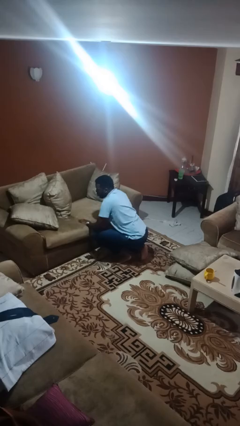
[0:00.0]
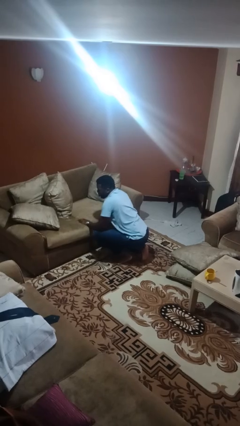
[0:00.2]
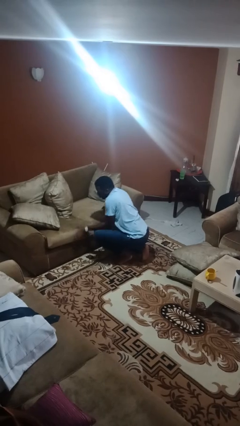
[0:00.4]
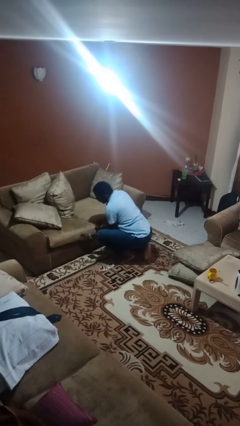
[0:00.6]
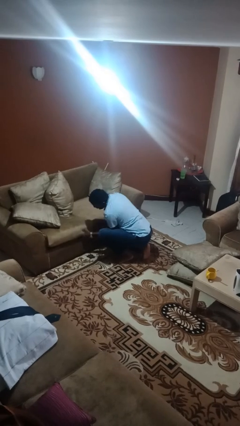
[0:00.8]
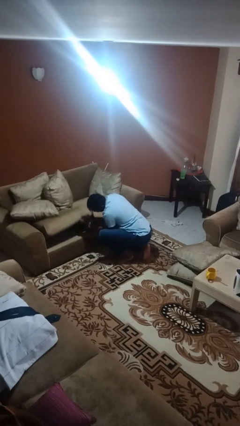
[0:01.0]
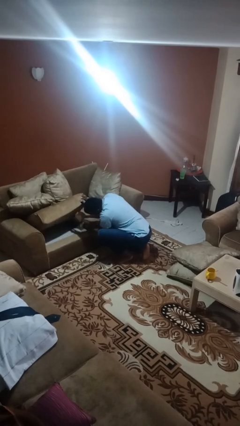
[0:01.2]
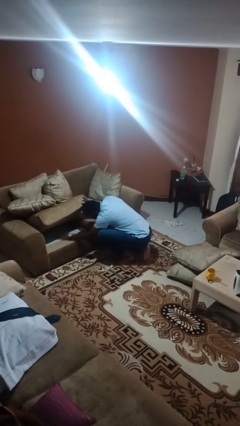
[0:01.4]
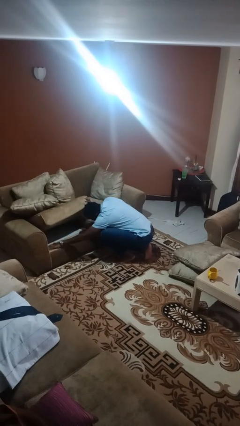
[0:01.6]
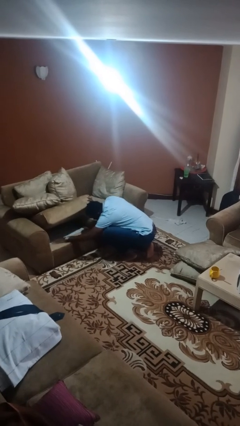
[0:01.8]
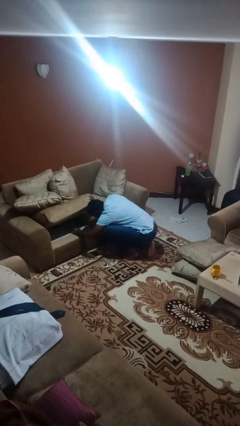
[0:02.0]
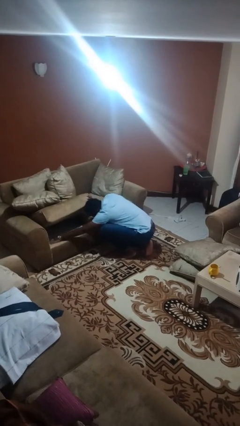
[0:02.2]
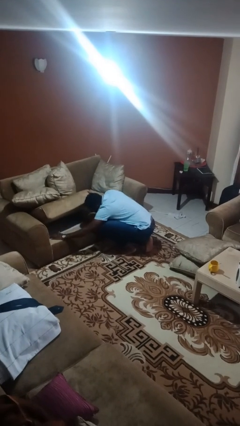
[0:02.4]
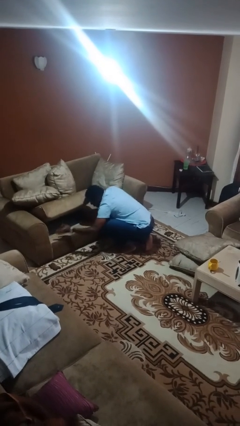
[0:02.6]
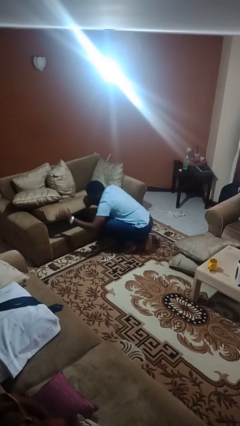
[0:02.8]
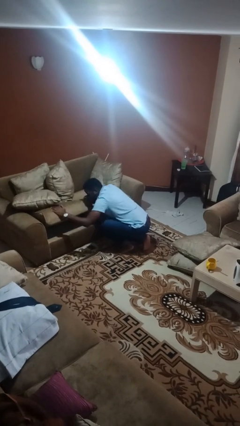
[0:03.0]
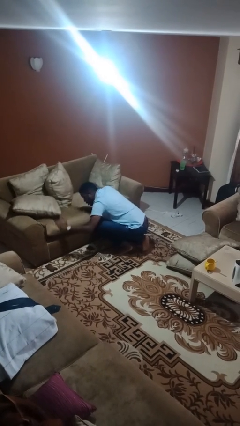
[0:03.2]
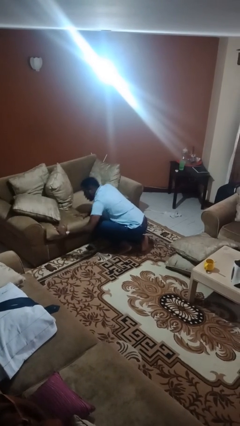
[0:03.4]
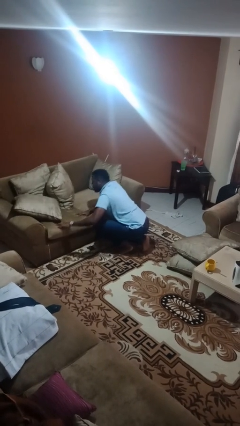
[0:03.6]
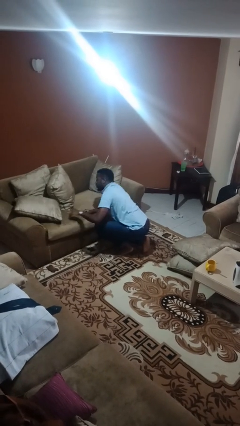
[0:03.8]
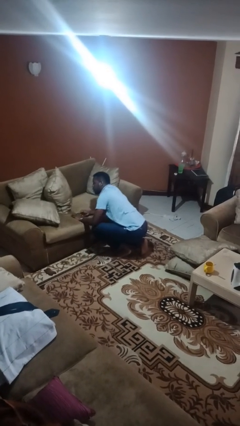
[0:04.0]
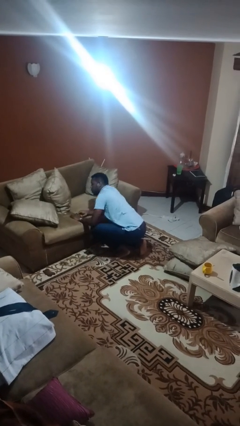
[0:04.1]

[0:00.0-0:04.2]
person searches under couch

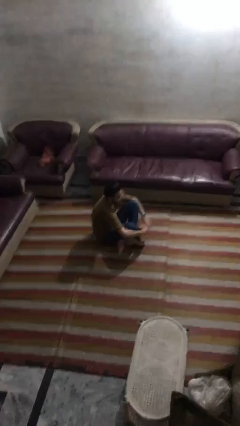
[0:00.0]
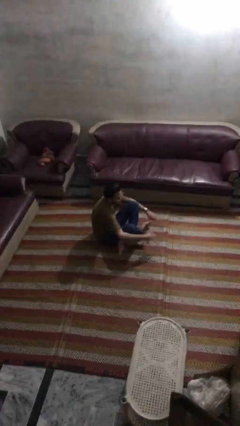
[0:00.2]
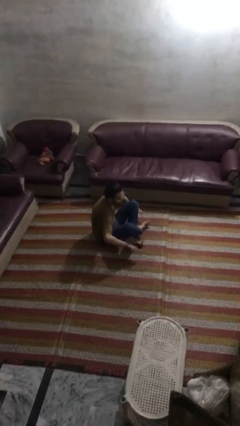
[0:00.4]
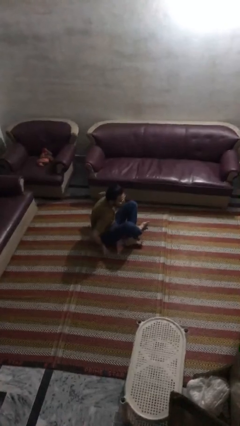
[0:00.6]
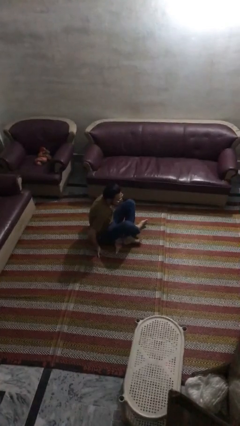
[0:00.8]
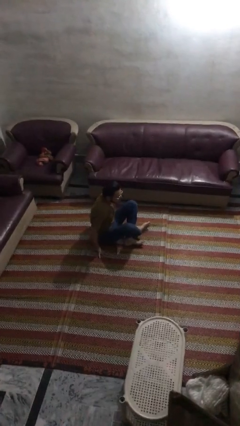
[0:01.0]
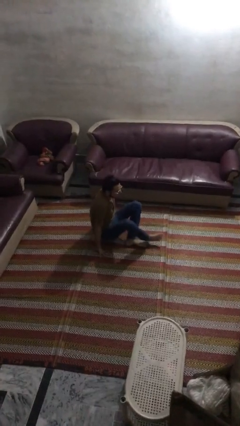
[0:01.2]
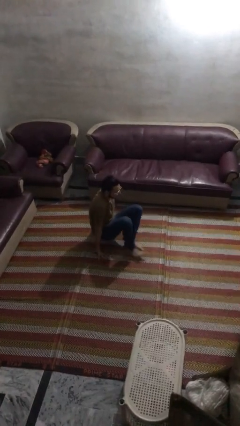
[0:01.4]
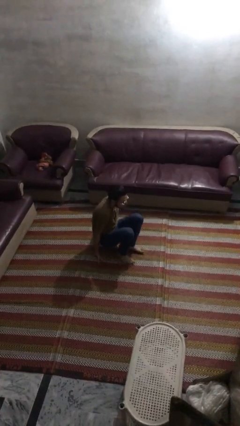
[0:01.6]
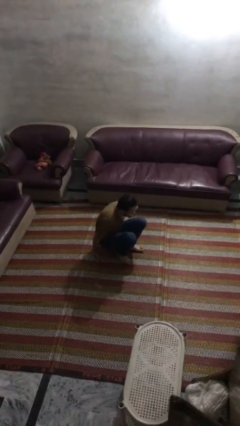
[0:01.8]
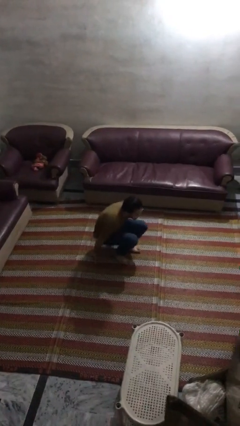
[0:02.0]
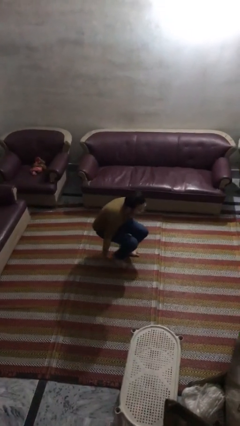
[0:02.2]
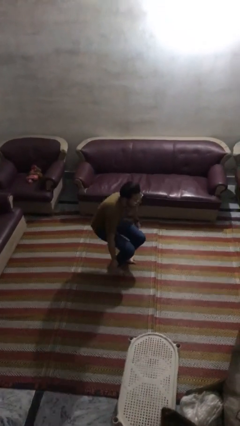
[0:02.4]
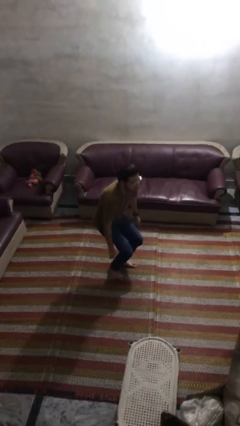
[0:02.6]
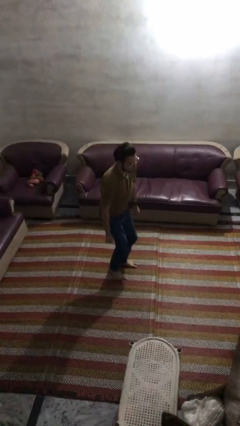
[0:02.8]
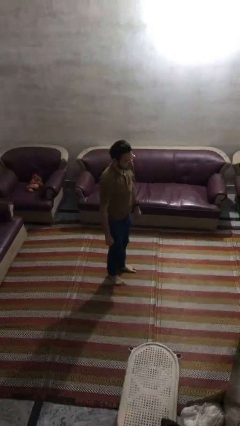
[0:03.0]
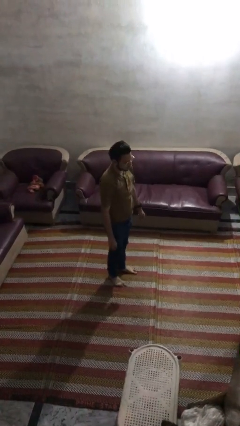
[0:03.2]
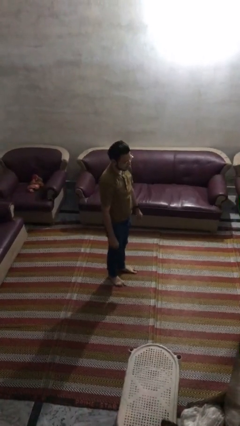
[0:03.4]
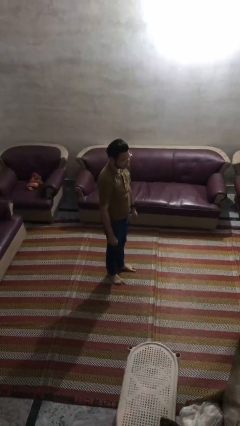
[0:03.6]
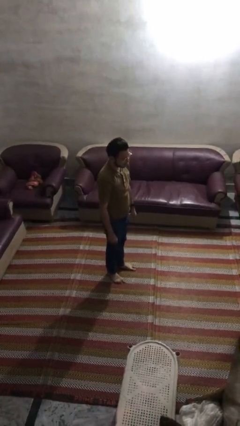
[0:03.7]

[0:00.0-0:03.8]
person stands up from floor

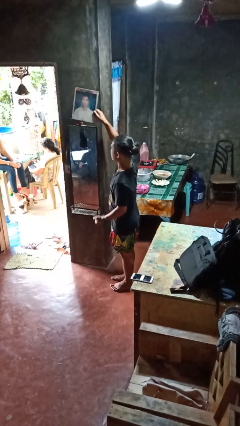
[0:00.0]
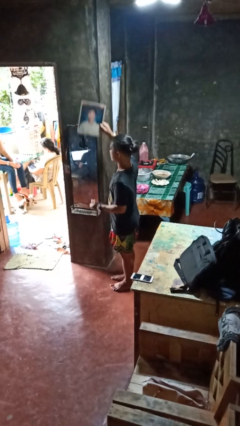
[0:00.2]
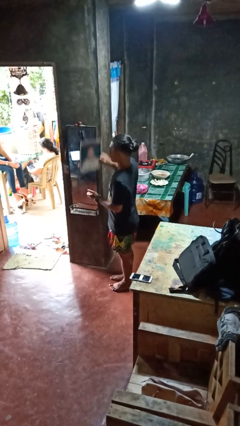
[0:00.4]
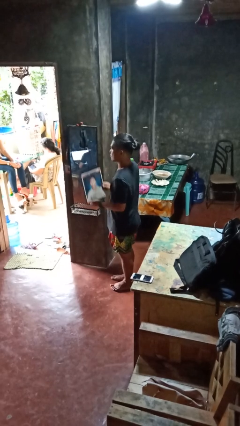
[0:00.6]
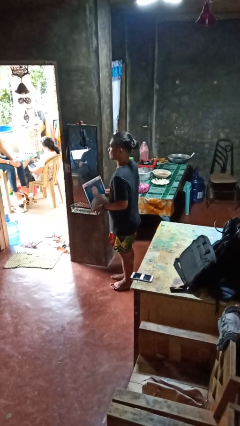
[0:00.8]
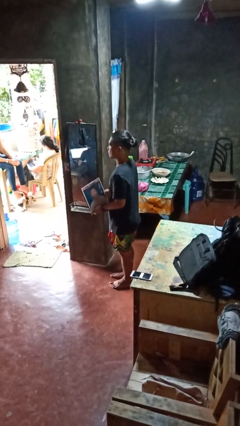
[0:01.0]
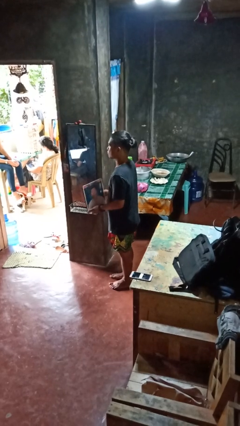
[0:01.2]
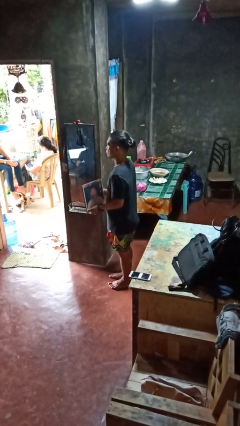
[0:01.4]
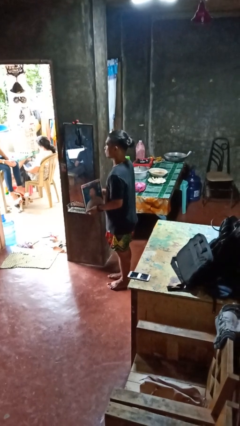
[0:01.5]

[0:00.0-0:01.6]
person takes down picture frame

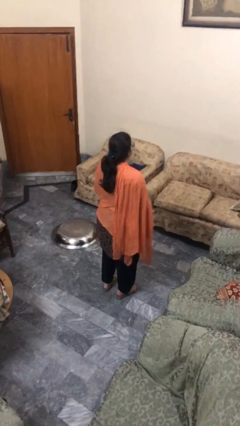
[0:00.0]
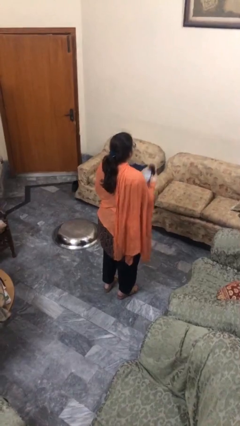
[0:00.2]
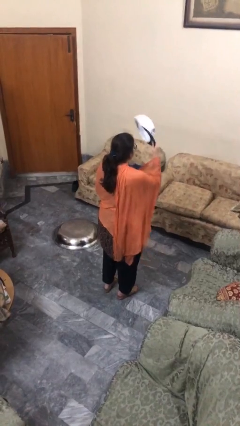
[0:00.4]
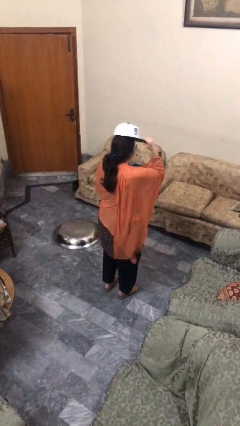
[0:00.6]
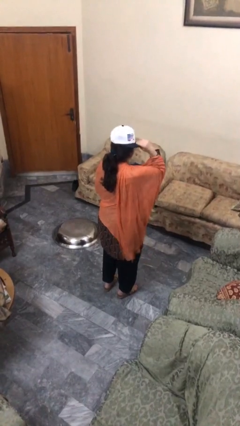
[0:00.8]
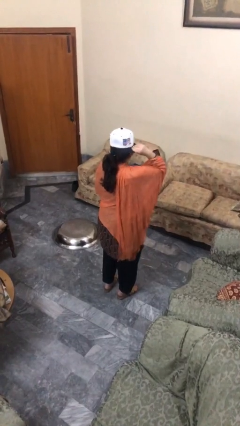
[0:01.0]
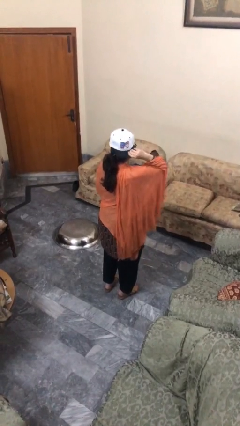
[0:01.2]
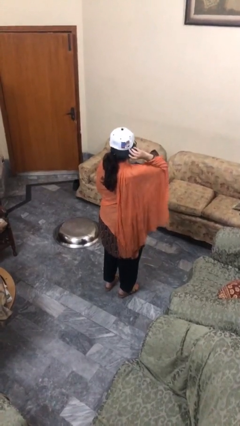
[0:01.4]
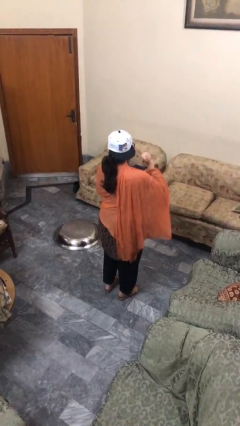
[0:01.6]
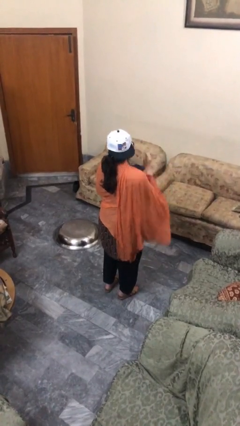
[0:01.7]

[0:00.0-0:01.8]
person puts on hat

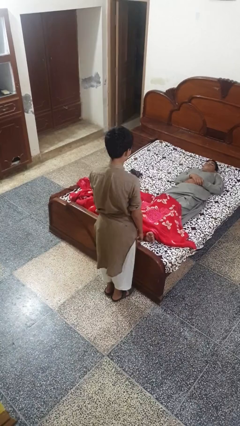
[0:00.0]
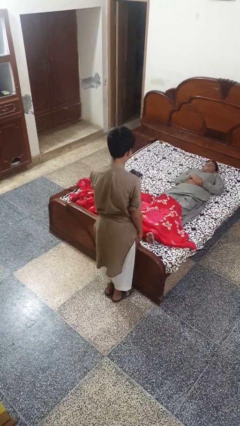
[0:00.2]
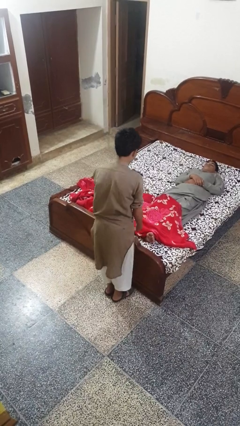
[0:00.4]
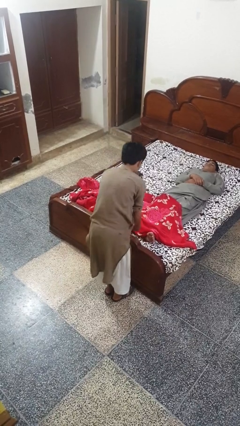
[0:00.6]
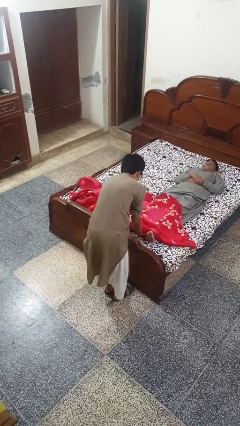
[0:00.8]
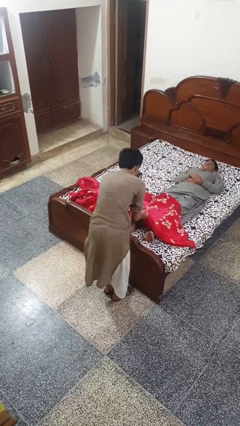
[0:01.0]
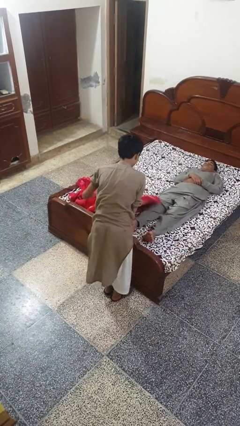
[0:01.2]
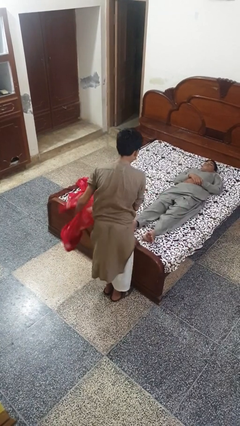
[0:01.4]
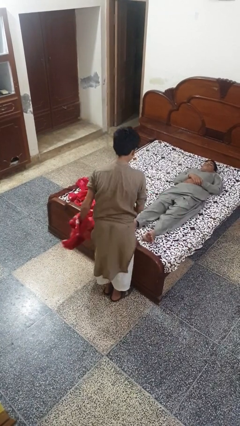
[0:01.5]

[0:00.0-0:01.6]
person uncovers friend with blanket

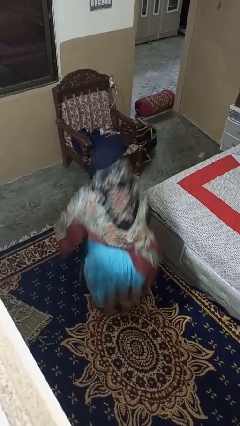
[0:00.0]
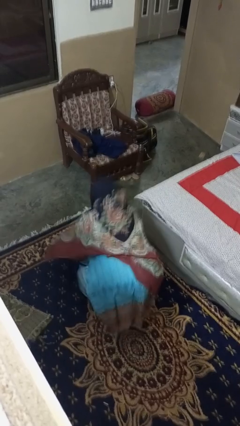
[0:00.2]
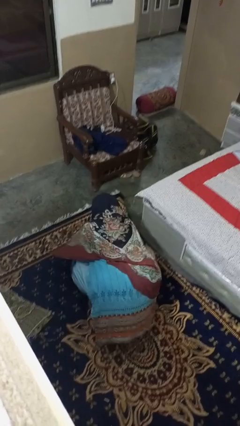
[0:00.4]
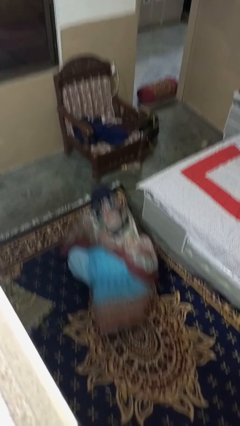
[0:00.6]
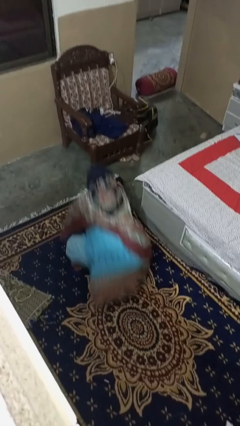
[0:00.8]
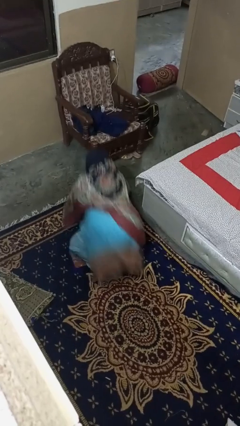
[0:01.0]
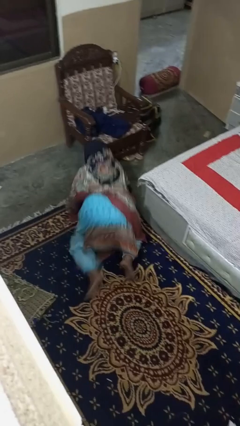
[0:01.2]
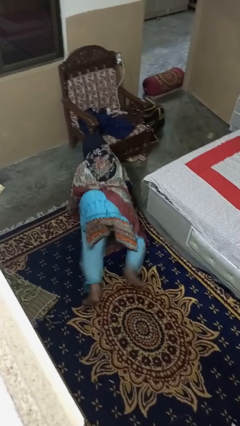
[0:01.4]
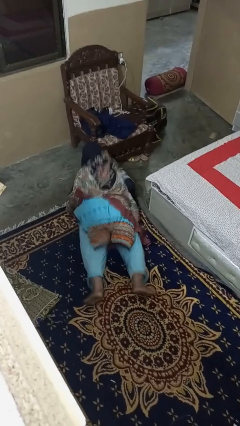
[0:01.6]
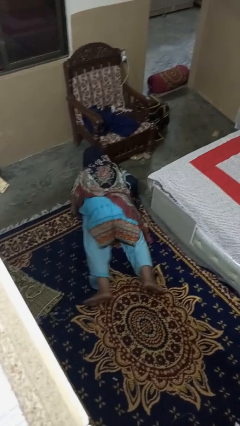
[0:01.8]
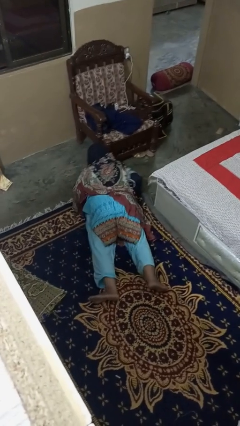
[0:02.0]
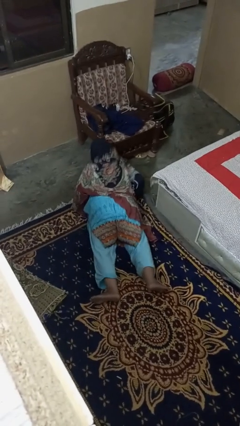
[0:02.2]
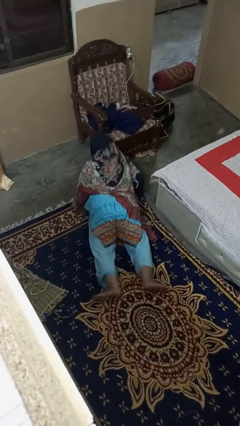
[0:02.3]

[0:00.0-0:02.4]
person exercises with pushup

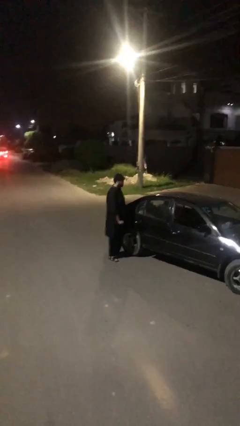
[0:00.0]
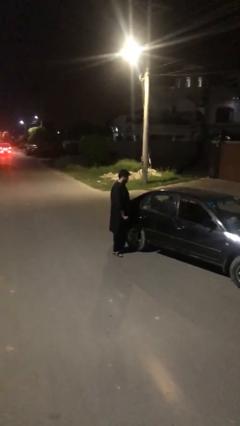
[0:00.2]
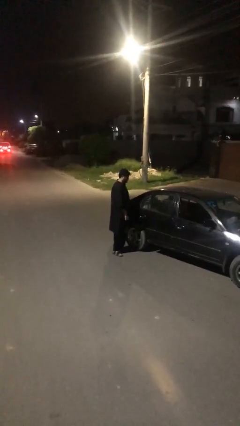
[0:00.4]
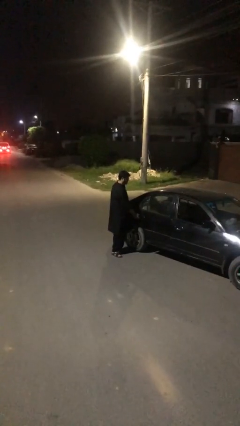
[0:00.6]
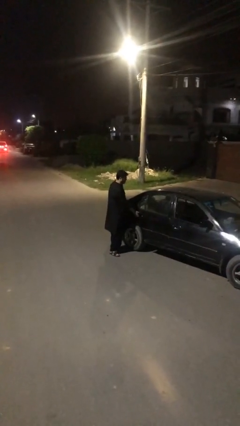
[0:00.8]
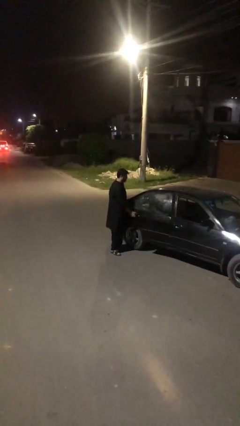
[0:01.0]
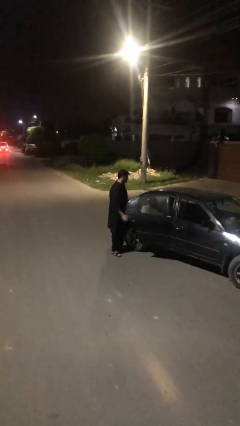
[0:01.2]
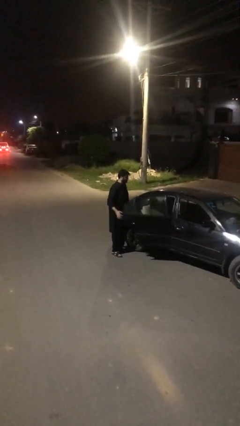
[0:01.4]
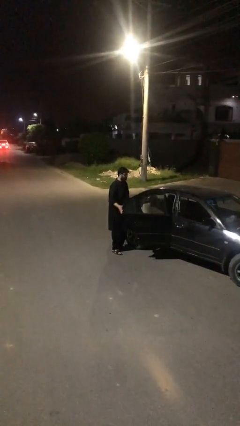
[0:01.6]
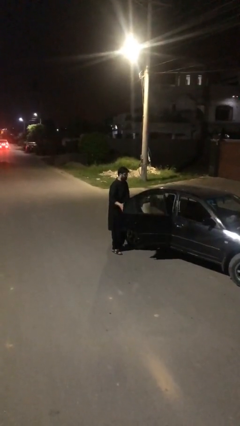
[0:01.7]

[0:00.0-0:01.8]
person opens car door
